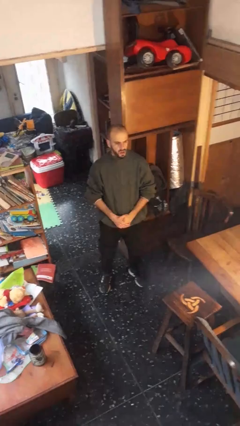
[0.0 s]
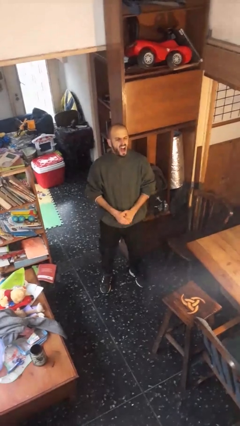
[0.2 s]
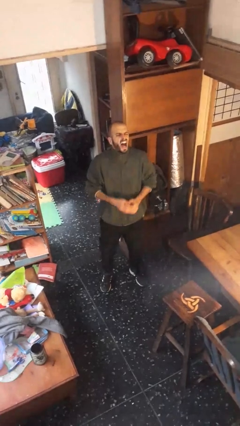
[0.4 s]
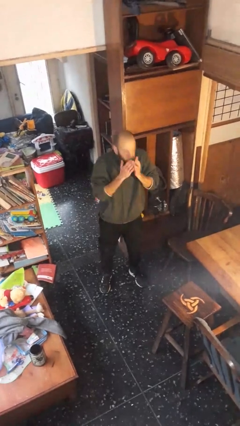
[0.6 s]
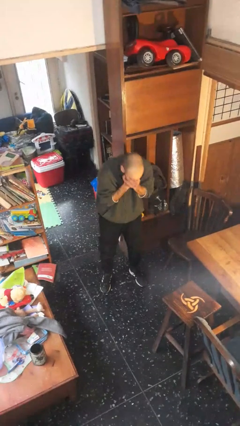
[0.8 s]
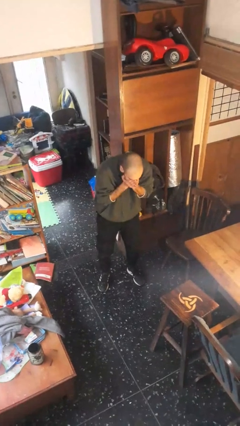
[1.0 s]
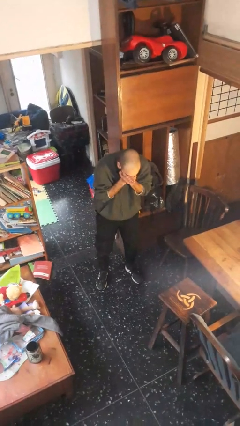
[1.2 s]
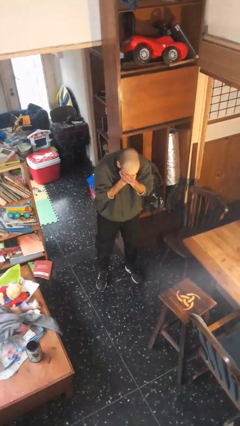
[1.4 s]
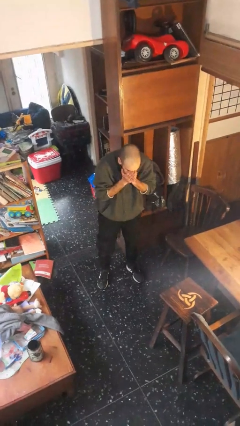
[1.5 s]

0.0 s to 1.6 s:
person sneezes into hand

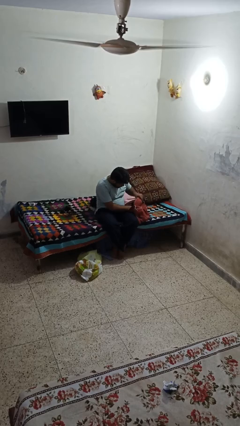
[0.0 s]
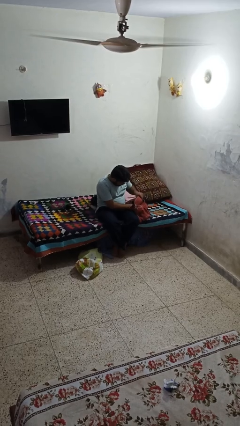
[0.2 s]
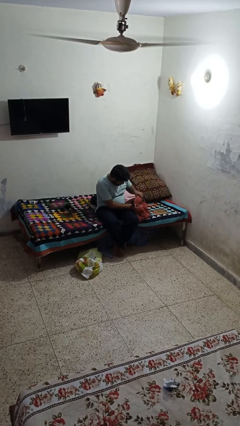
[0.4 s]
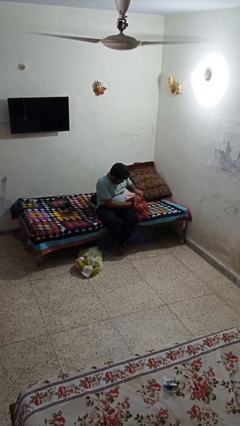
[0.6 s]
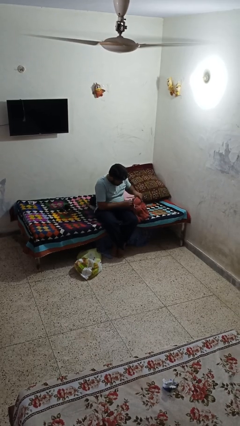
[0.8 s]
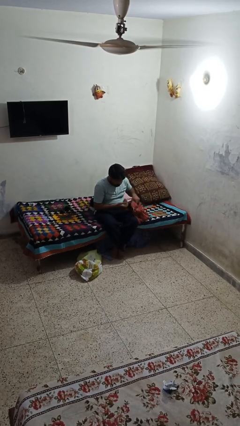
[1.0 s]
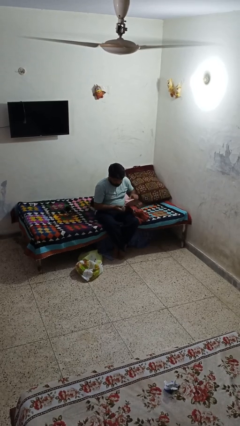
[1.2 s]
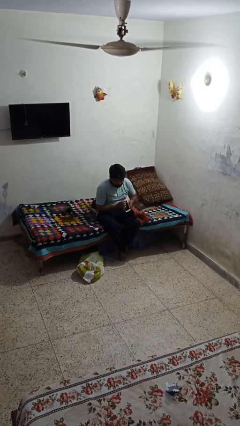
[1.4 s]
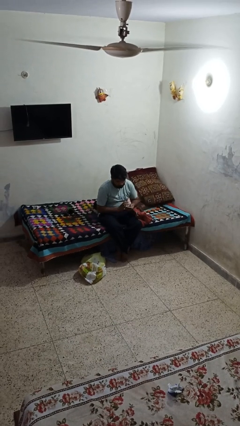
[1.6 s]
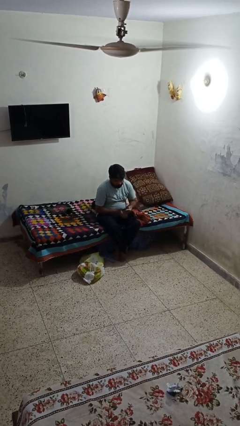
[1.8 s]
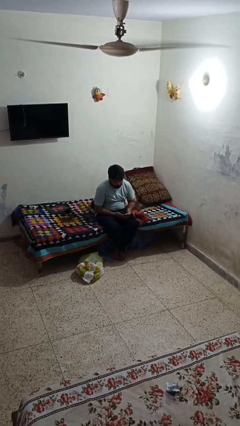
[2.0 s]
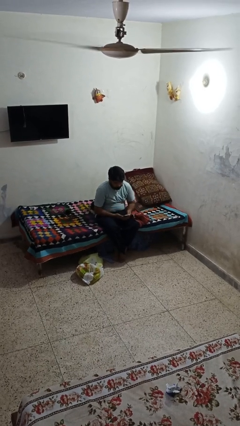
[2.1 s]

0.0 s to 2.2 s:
person takes object from purse

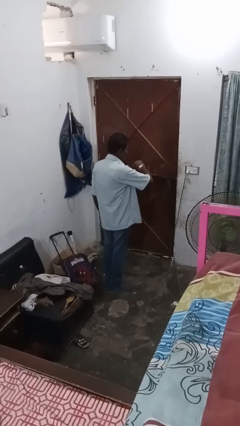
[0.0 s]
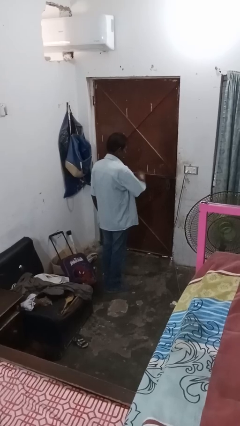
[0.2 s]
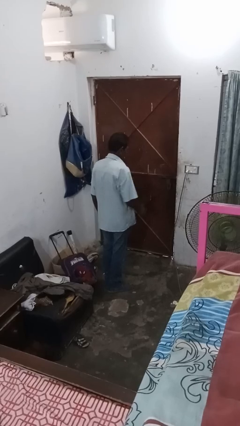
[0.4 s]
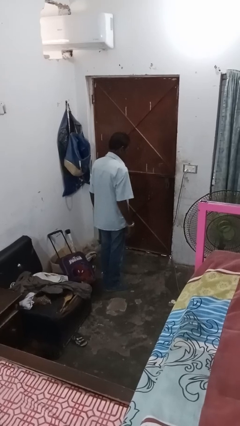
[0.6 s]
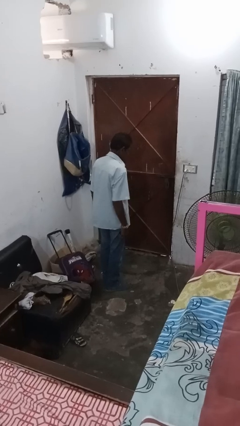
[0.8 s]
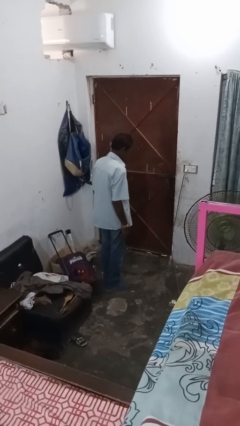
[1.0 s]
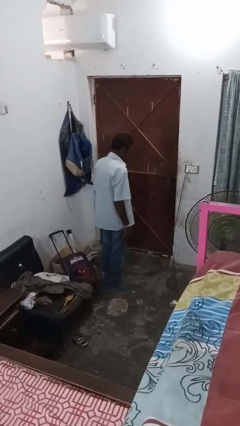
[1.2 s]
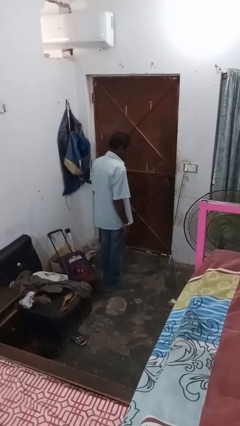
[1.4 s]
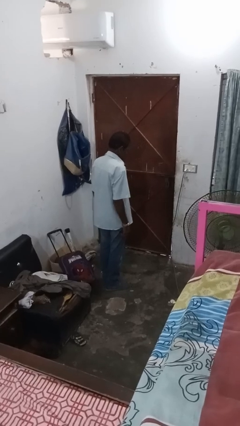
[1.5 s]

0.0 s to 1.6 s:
person takes off wristwatch

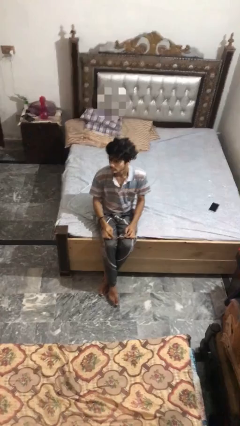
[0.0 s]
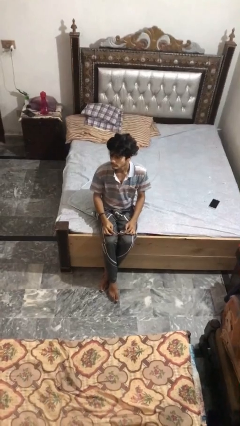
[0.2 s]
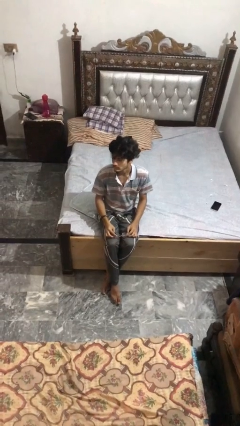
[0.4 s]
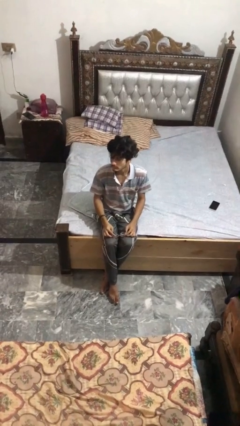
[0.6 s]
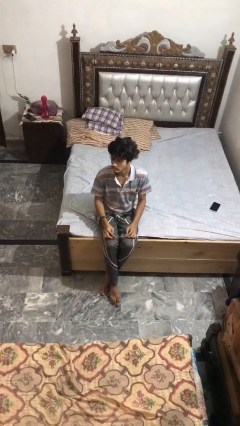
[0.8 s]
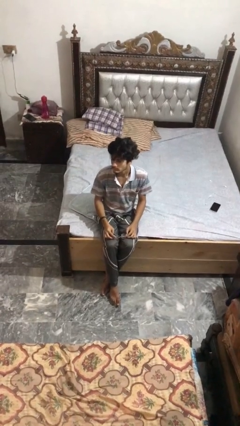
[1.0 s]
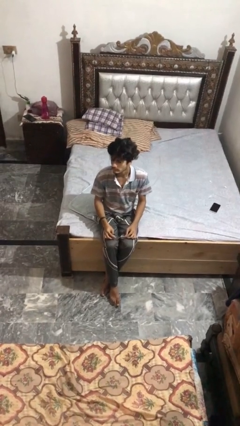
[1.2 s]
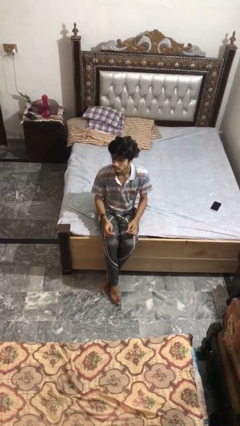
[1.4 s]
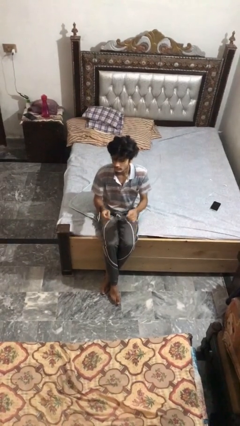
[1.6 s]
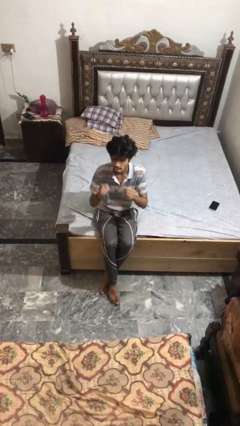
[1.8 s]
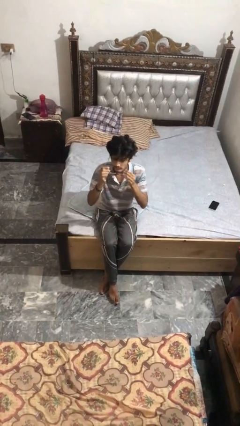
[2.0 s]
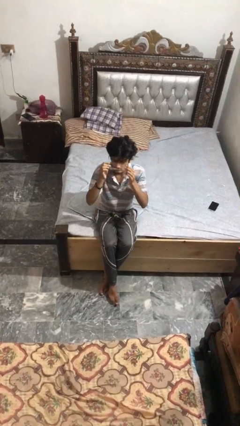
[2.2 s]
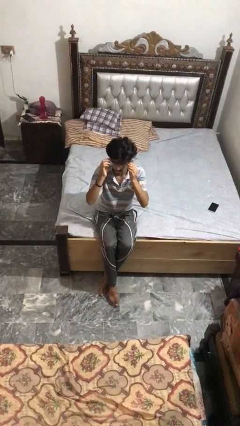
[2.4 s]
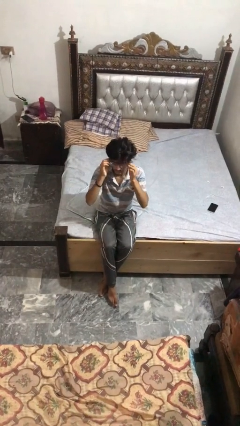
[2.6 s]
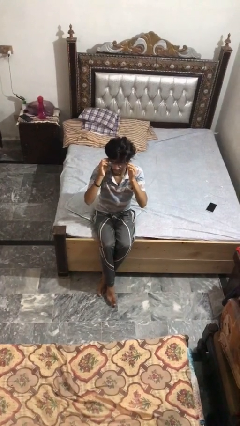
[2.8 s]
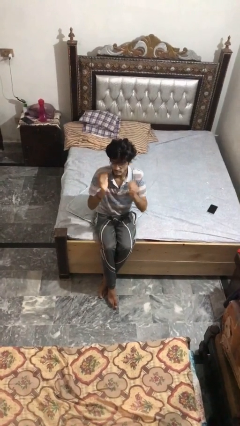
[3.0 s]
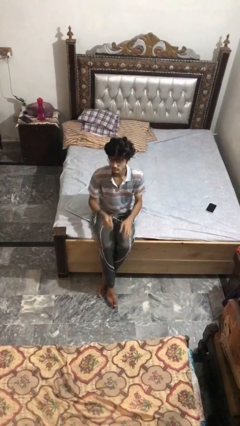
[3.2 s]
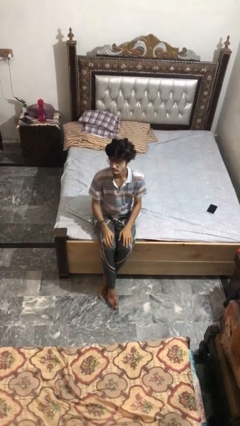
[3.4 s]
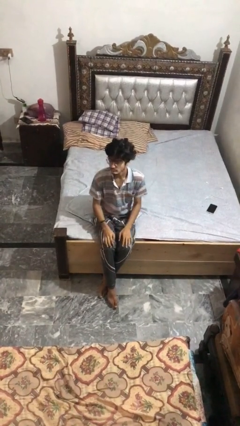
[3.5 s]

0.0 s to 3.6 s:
person puts on glasses

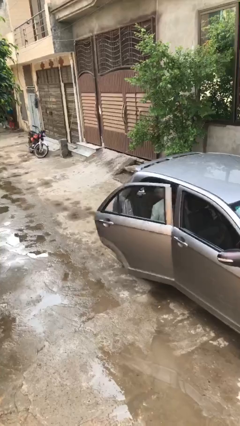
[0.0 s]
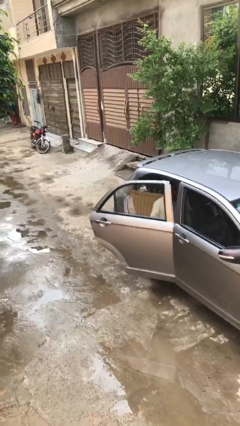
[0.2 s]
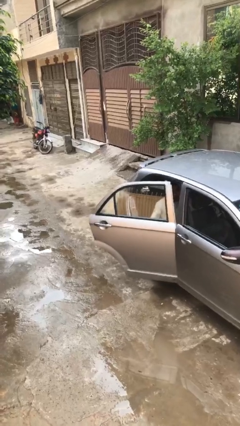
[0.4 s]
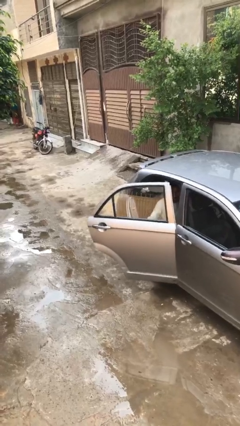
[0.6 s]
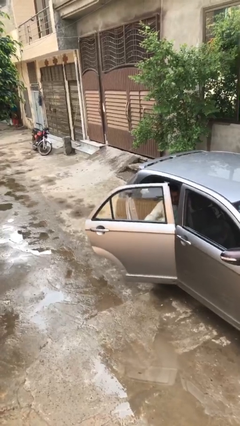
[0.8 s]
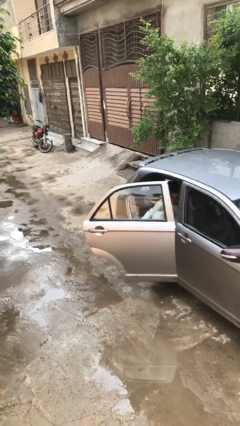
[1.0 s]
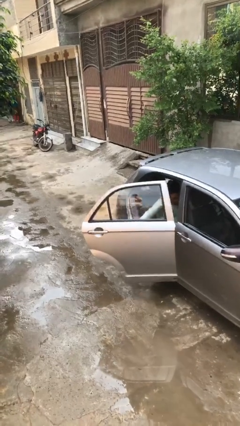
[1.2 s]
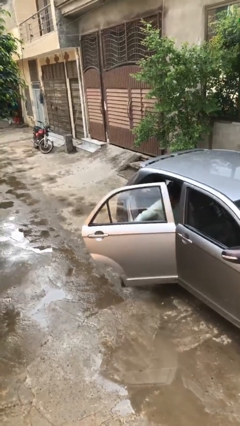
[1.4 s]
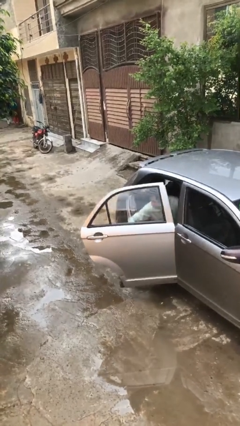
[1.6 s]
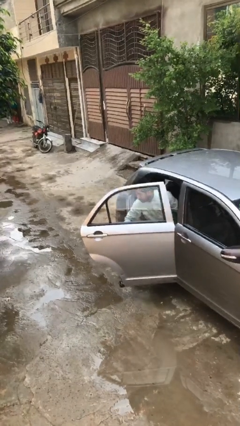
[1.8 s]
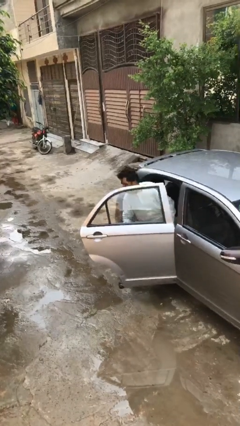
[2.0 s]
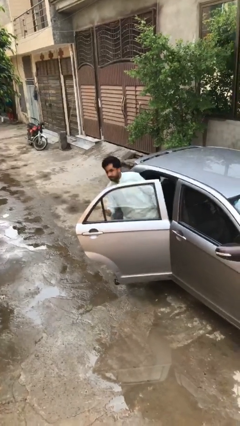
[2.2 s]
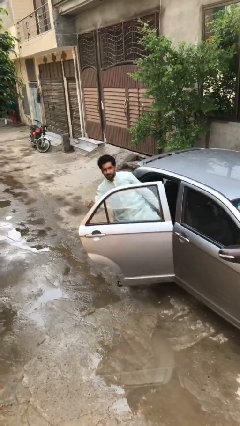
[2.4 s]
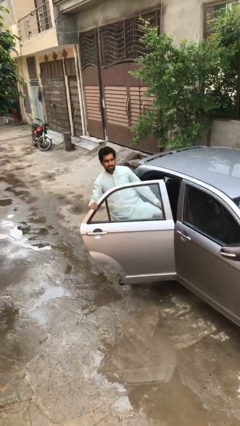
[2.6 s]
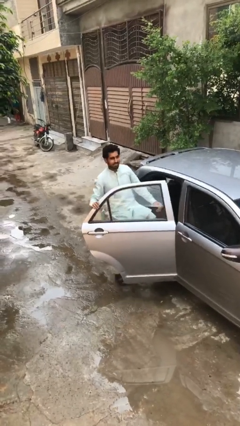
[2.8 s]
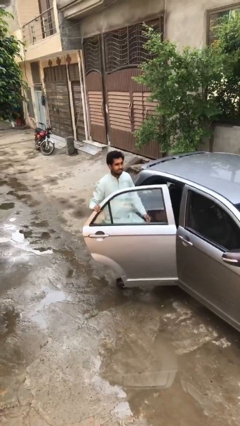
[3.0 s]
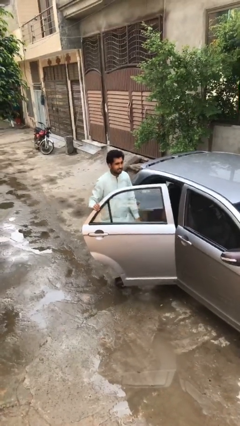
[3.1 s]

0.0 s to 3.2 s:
person exits car

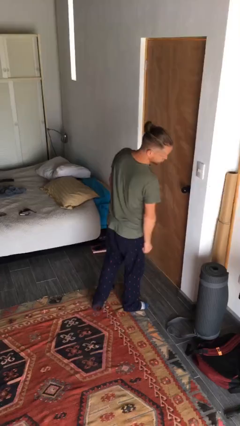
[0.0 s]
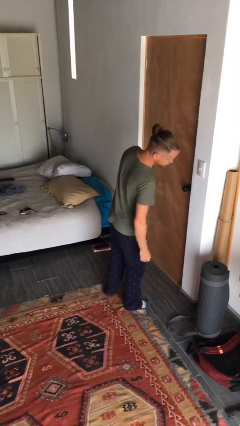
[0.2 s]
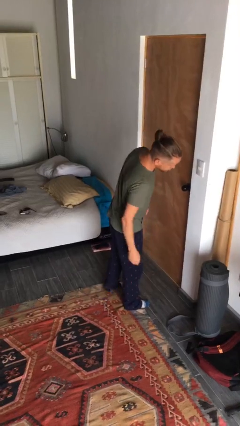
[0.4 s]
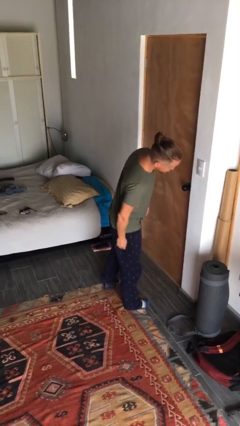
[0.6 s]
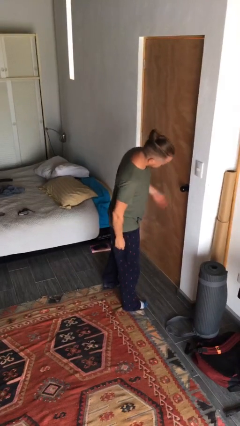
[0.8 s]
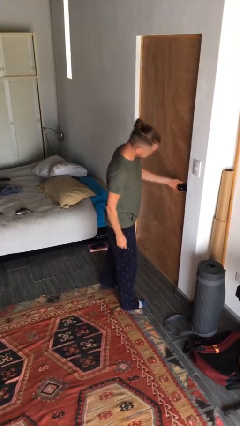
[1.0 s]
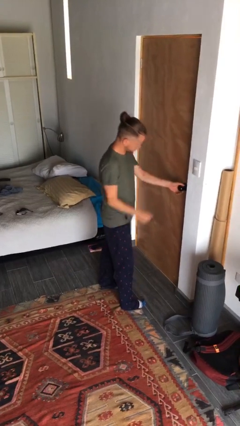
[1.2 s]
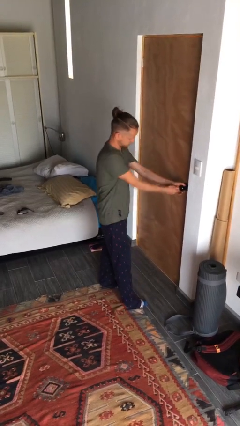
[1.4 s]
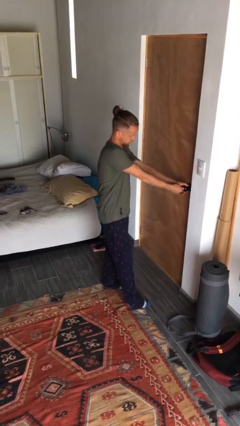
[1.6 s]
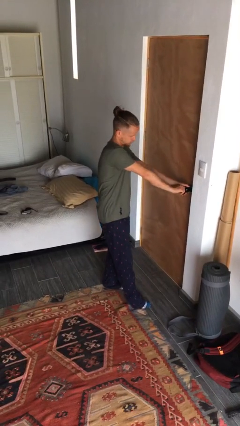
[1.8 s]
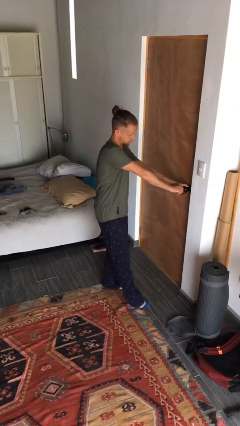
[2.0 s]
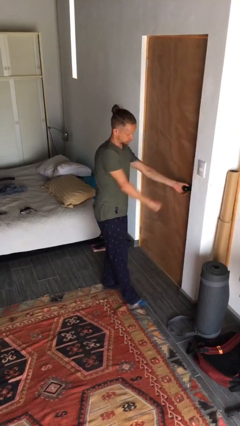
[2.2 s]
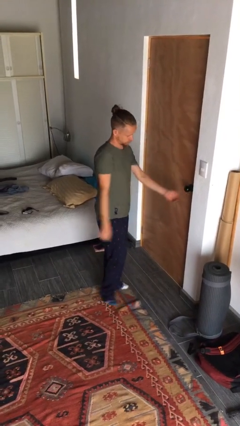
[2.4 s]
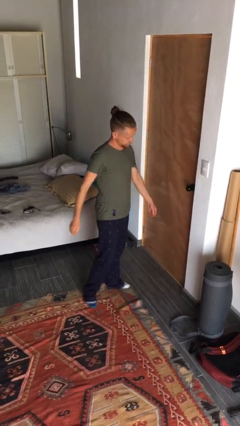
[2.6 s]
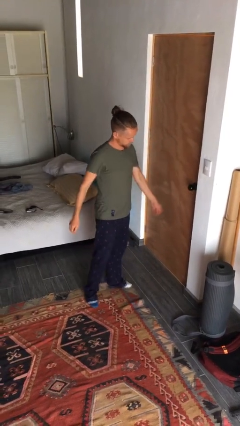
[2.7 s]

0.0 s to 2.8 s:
person unlocks door with keys

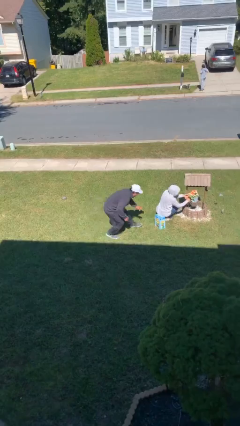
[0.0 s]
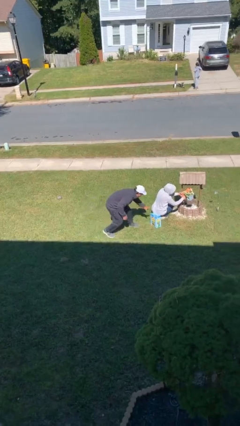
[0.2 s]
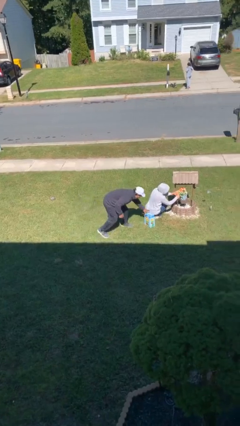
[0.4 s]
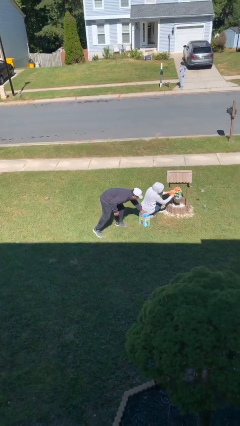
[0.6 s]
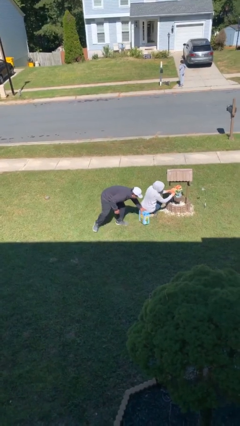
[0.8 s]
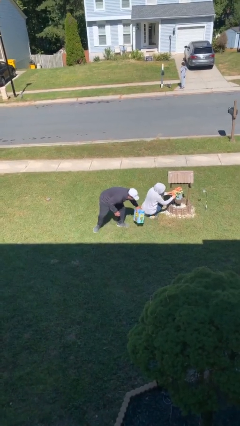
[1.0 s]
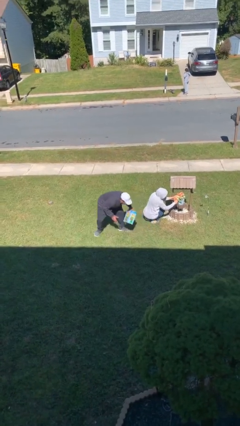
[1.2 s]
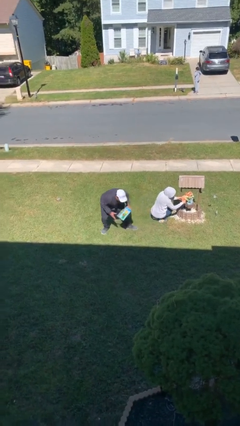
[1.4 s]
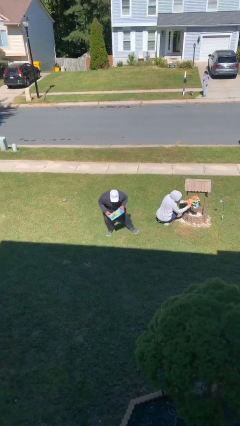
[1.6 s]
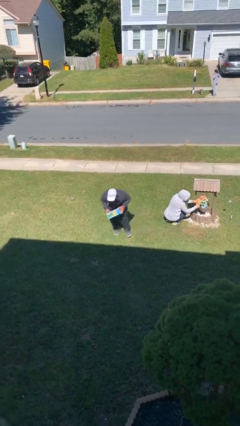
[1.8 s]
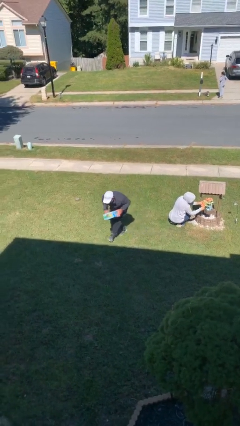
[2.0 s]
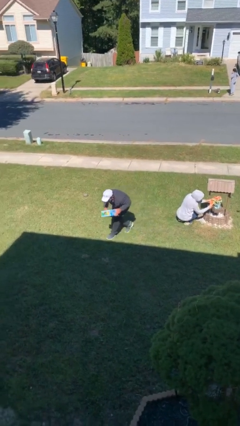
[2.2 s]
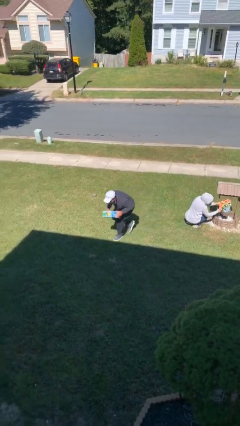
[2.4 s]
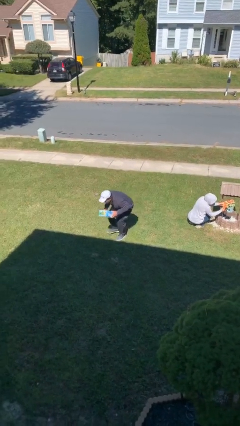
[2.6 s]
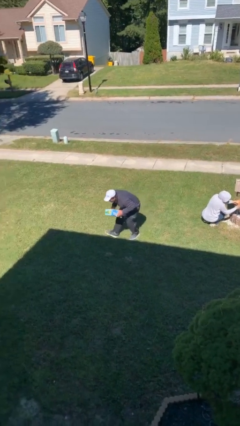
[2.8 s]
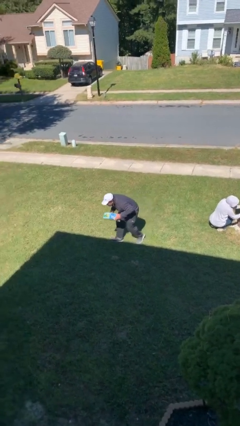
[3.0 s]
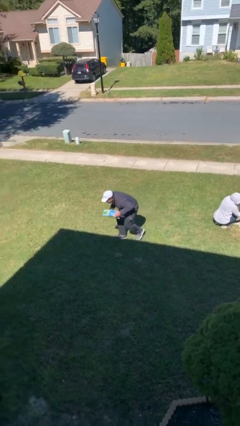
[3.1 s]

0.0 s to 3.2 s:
person steals object from person
